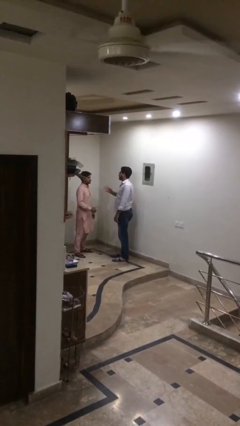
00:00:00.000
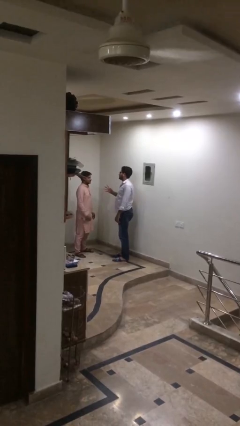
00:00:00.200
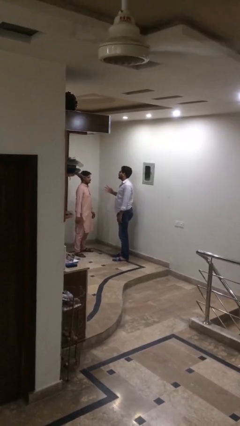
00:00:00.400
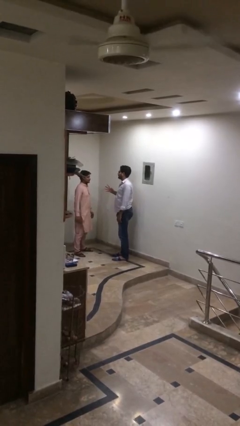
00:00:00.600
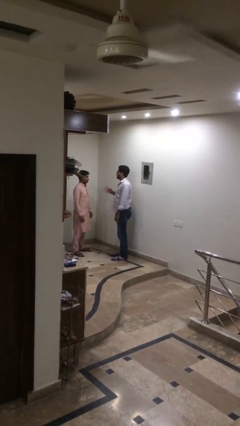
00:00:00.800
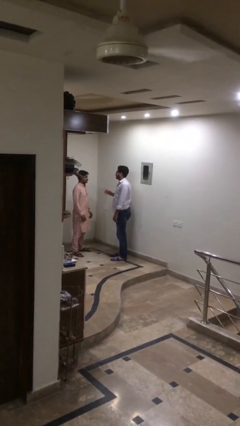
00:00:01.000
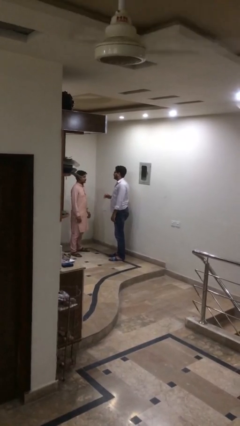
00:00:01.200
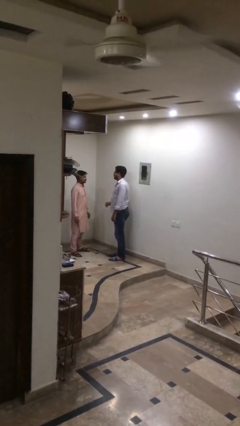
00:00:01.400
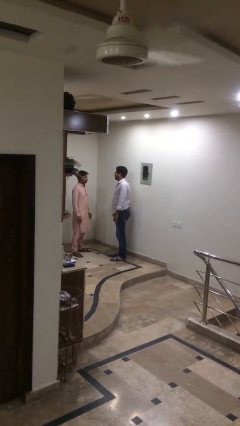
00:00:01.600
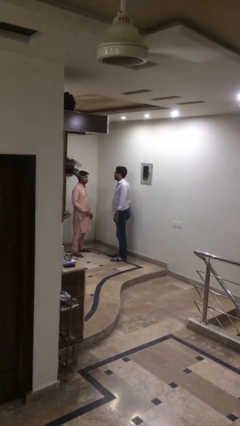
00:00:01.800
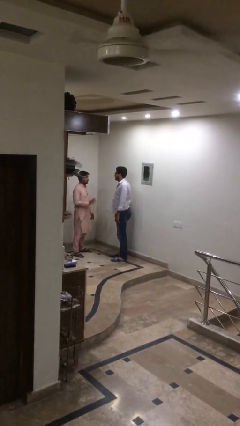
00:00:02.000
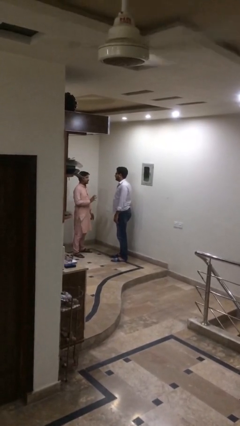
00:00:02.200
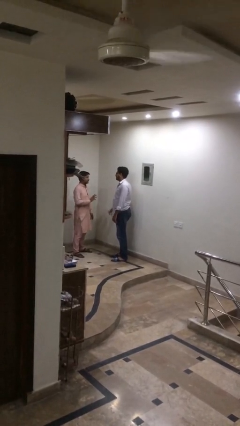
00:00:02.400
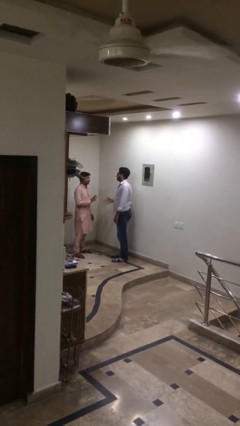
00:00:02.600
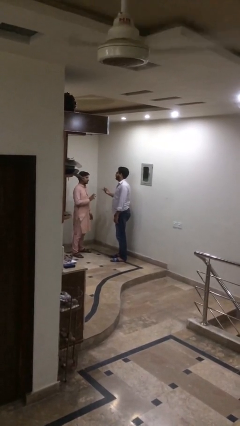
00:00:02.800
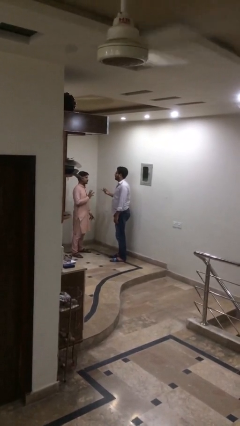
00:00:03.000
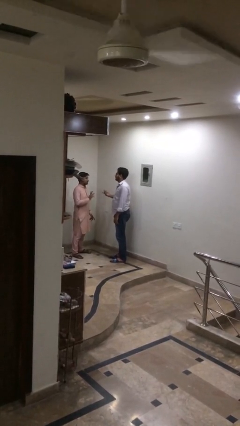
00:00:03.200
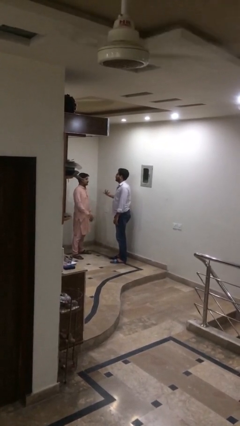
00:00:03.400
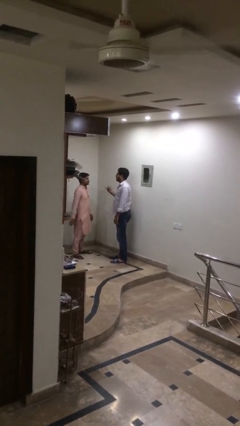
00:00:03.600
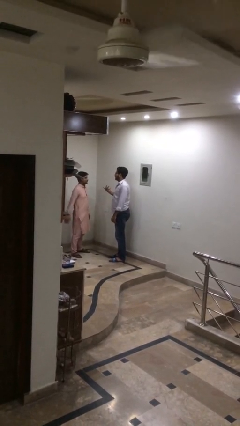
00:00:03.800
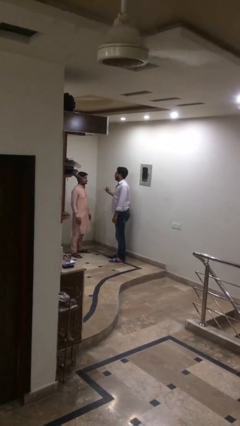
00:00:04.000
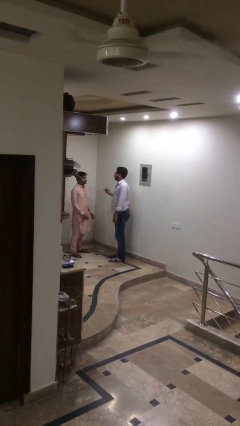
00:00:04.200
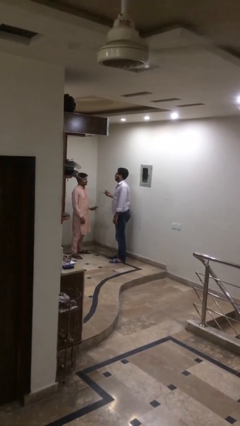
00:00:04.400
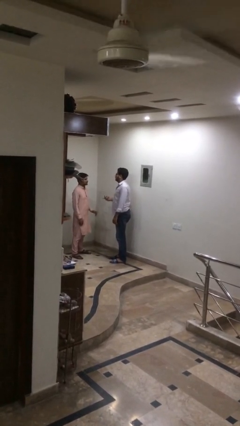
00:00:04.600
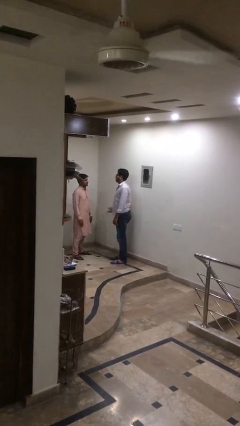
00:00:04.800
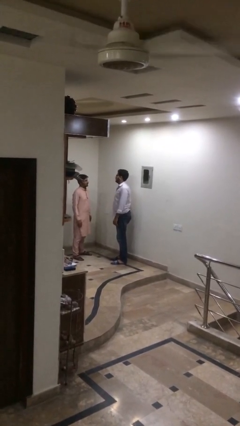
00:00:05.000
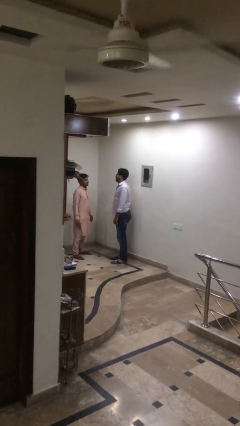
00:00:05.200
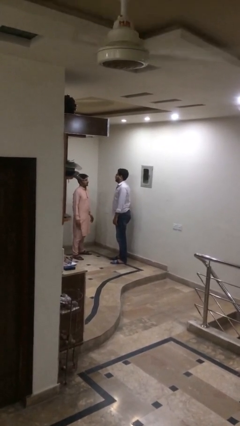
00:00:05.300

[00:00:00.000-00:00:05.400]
person talks to person

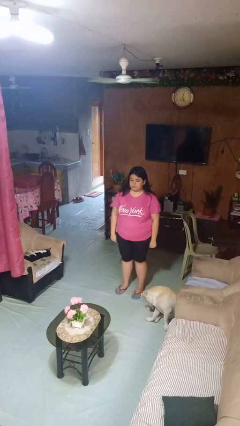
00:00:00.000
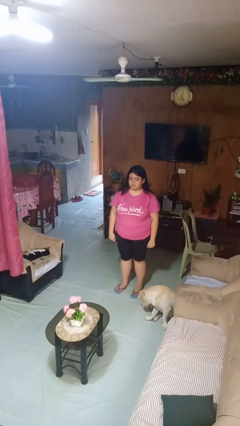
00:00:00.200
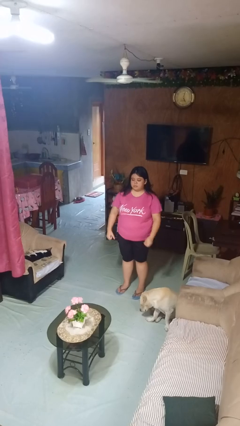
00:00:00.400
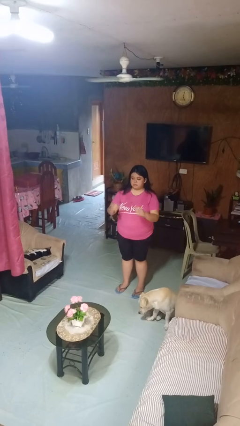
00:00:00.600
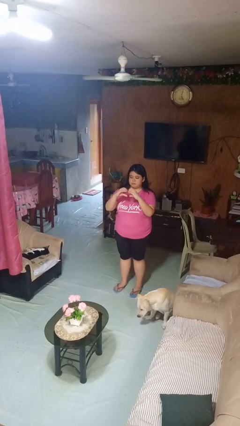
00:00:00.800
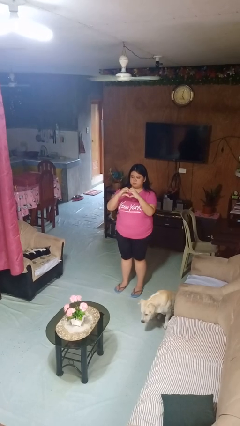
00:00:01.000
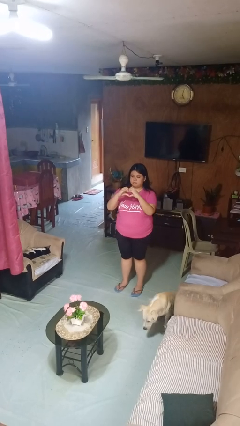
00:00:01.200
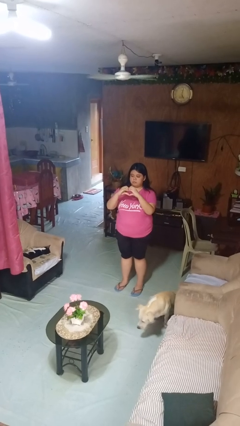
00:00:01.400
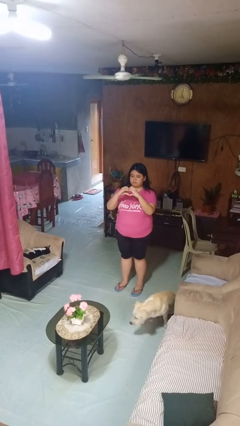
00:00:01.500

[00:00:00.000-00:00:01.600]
person gestures heart

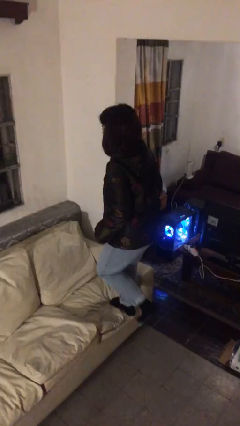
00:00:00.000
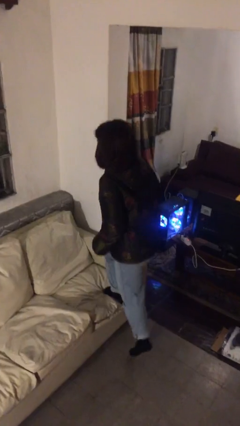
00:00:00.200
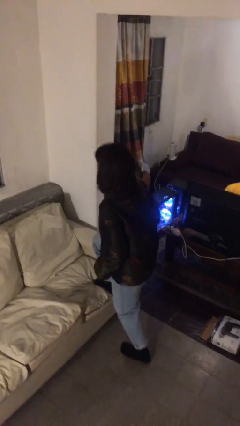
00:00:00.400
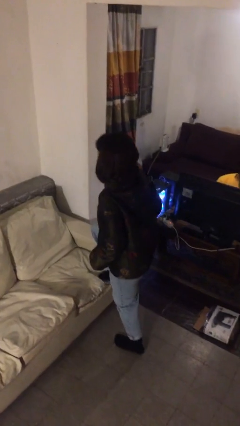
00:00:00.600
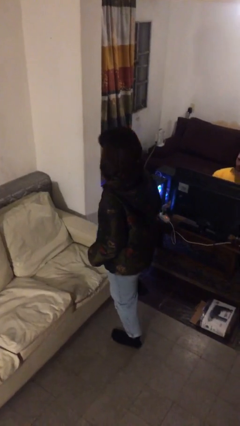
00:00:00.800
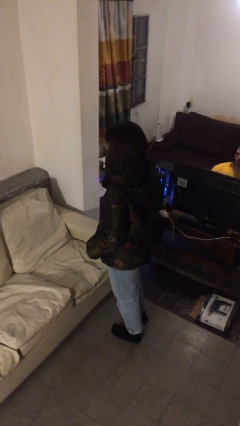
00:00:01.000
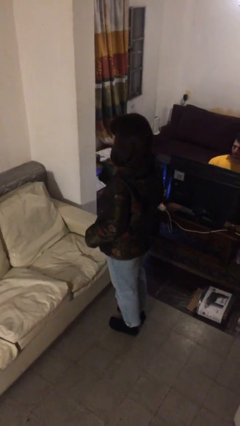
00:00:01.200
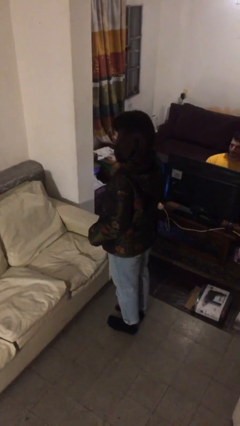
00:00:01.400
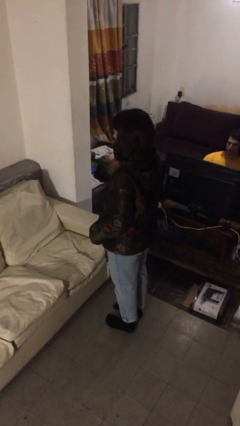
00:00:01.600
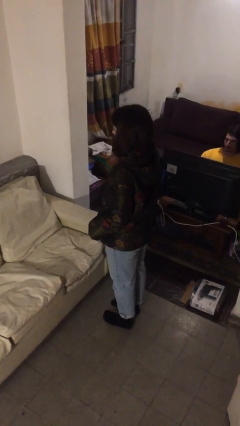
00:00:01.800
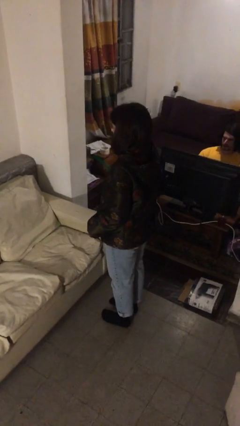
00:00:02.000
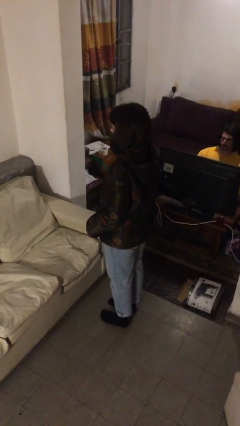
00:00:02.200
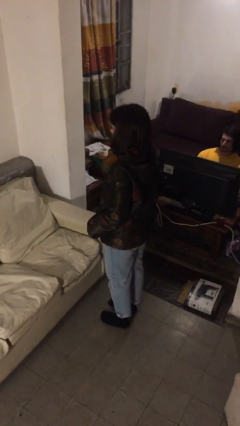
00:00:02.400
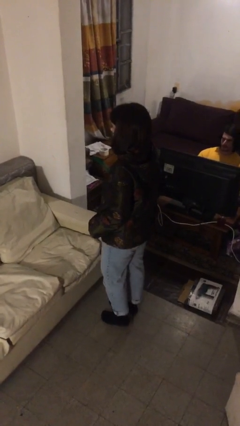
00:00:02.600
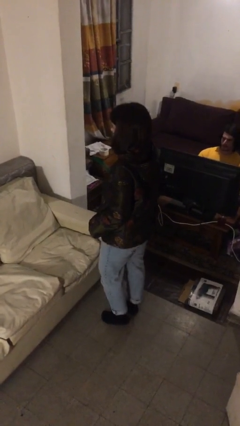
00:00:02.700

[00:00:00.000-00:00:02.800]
person climbs off couch

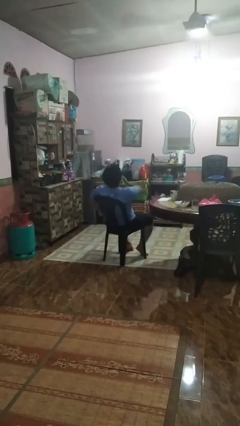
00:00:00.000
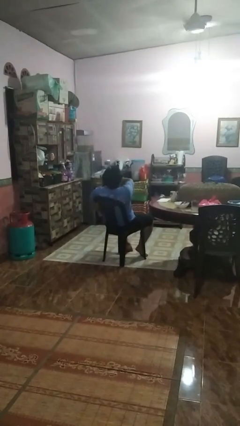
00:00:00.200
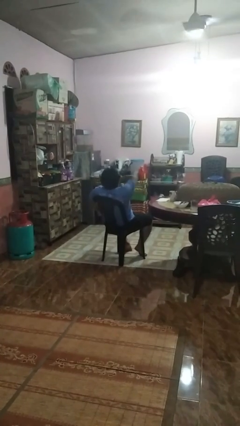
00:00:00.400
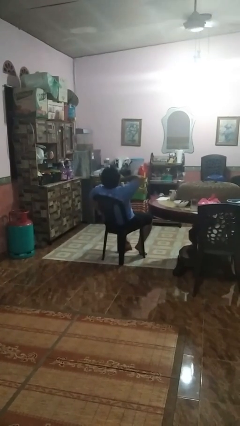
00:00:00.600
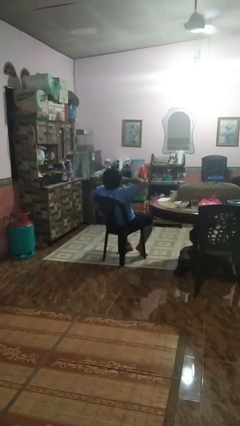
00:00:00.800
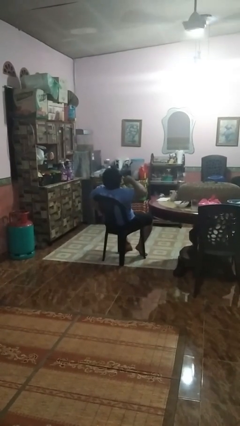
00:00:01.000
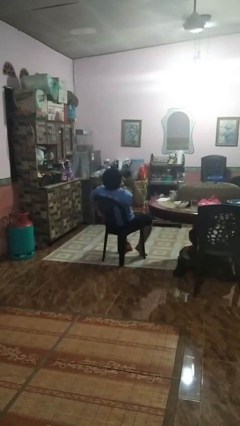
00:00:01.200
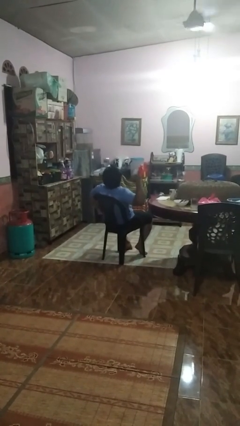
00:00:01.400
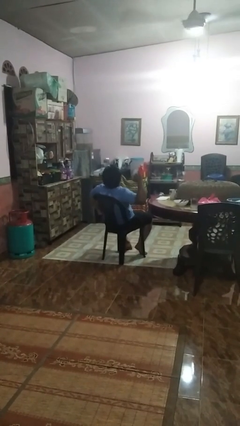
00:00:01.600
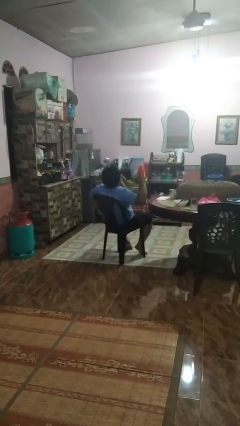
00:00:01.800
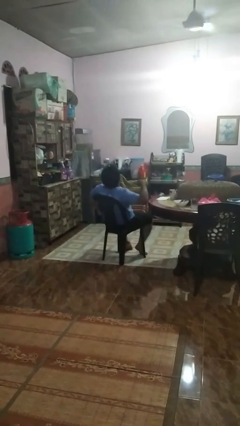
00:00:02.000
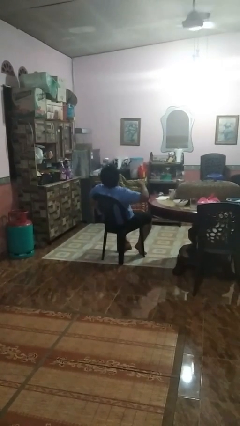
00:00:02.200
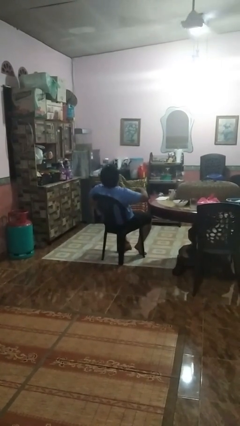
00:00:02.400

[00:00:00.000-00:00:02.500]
person gestures cut

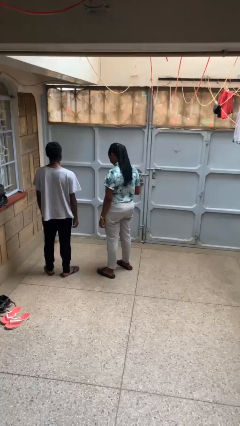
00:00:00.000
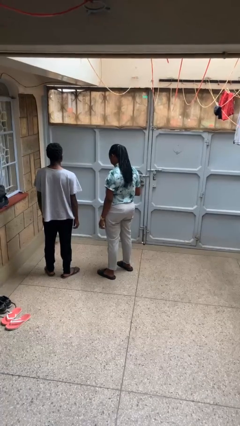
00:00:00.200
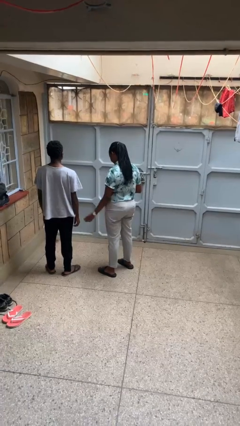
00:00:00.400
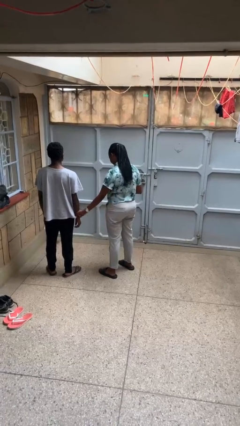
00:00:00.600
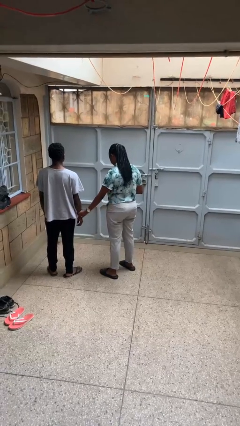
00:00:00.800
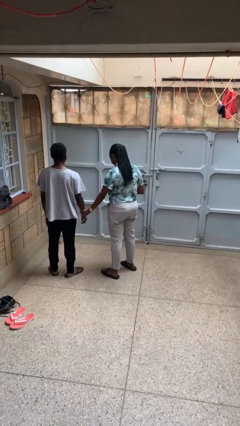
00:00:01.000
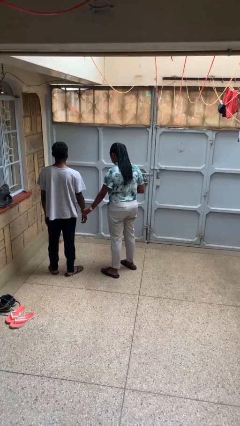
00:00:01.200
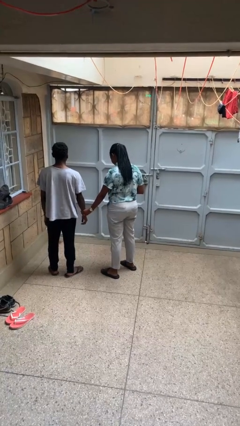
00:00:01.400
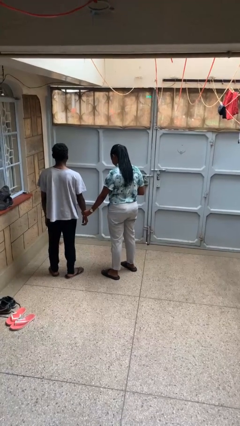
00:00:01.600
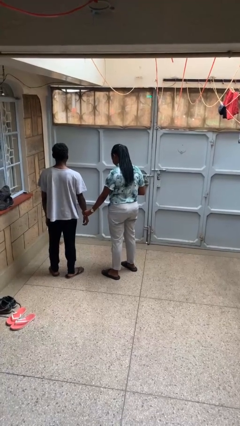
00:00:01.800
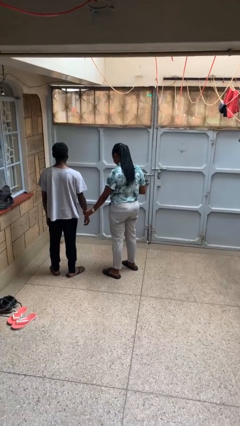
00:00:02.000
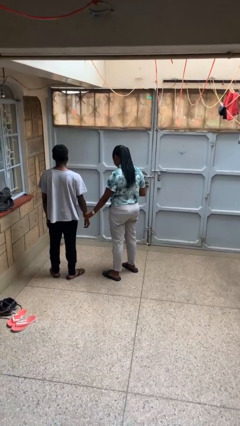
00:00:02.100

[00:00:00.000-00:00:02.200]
person grabs person by forearm

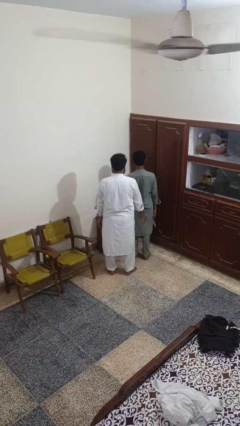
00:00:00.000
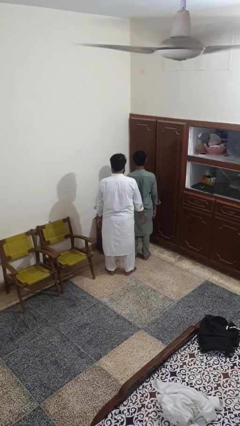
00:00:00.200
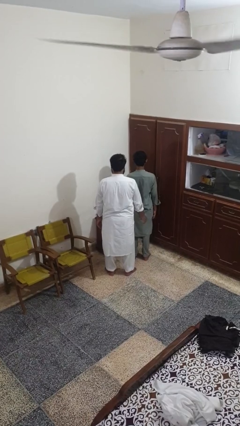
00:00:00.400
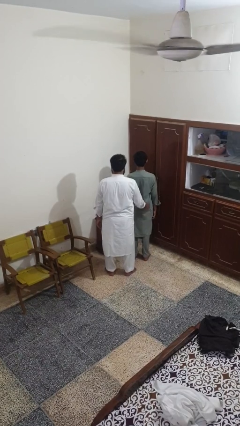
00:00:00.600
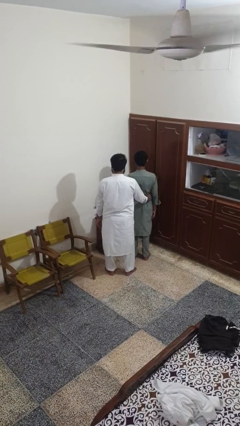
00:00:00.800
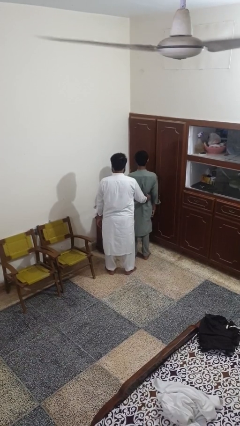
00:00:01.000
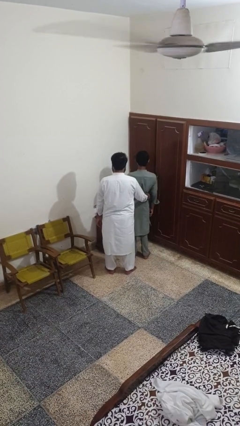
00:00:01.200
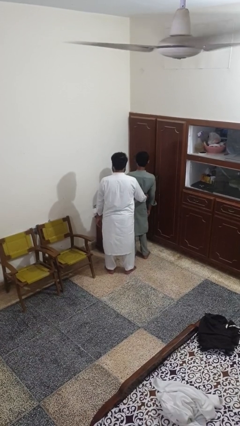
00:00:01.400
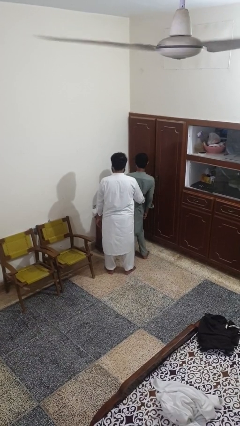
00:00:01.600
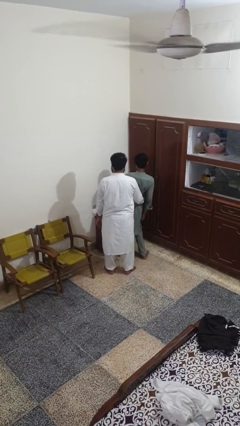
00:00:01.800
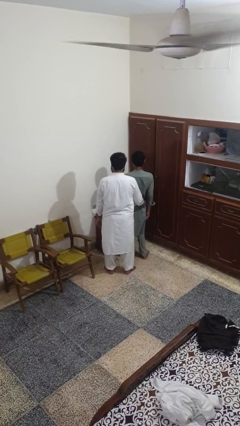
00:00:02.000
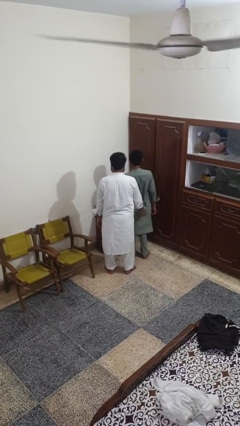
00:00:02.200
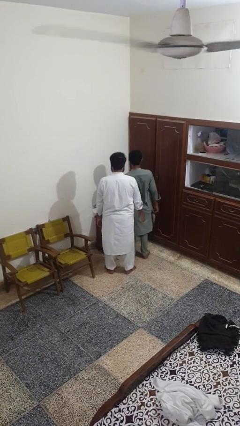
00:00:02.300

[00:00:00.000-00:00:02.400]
person tickles person

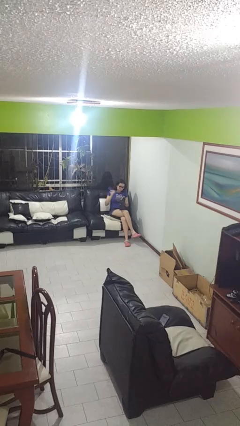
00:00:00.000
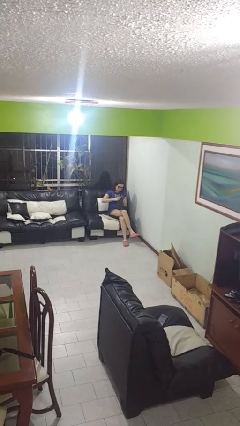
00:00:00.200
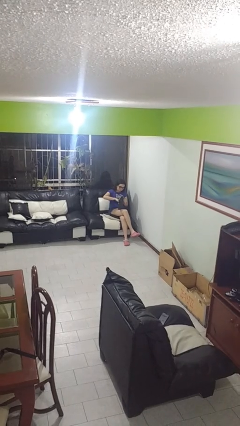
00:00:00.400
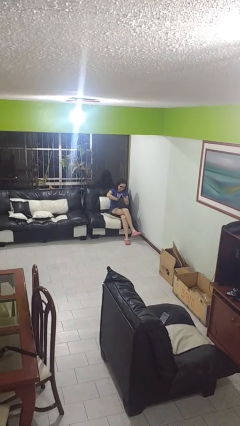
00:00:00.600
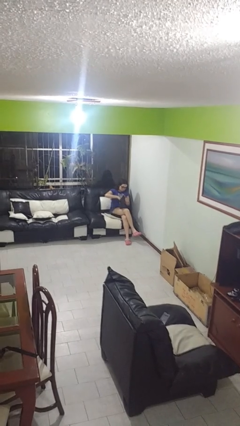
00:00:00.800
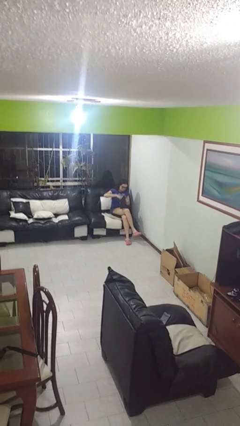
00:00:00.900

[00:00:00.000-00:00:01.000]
person puts object into purse
